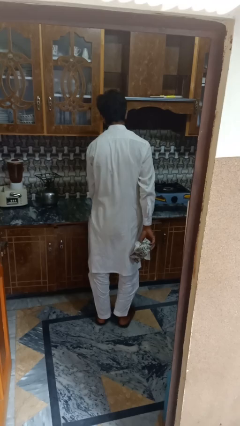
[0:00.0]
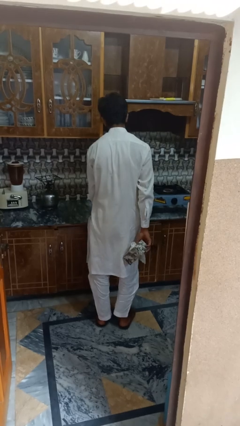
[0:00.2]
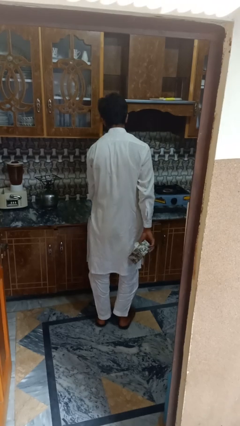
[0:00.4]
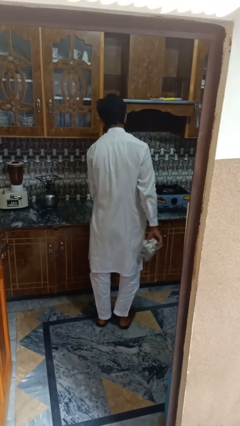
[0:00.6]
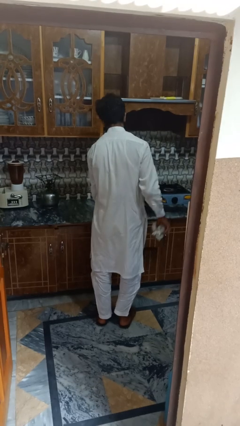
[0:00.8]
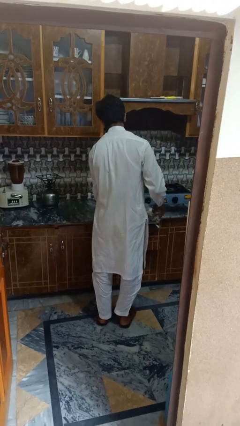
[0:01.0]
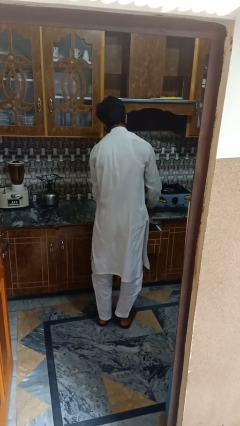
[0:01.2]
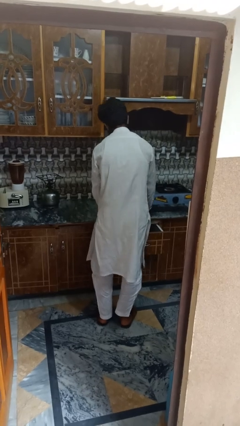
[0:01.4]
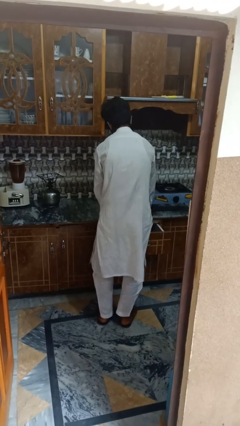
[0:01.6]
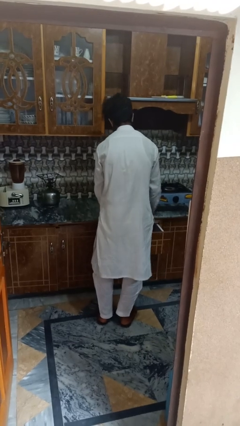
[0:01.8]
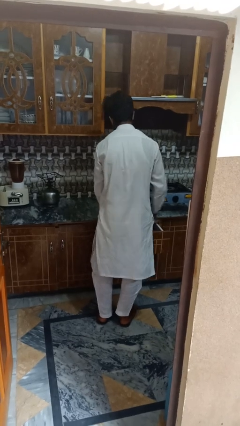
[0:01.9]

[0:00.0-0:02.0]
person takes object from kitchen drawer

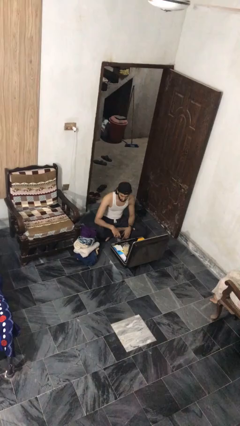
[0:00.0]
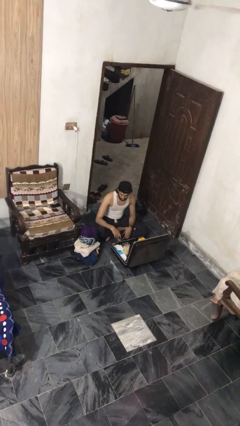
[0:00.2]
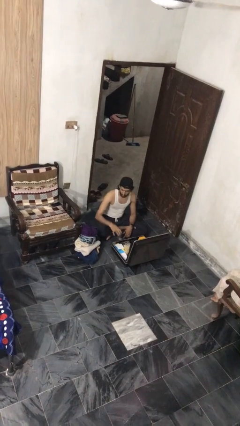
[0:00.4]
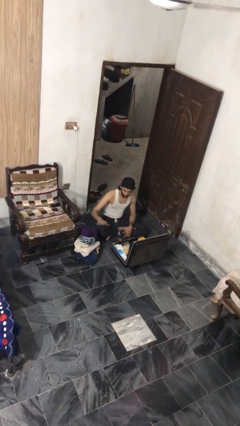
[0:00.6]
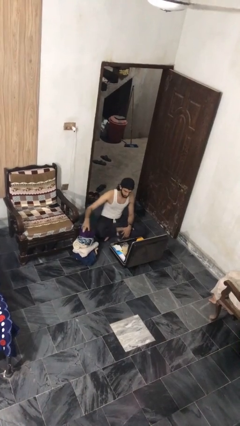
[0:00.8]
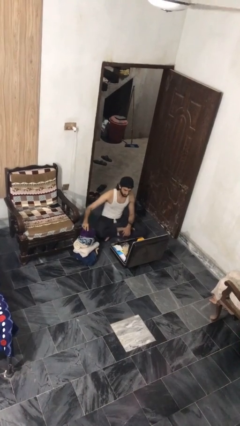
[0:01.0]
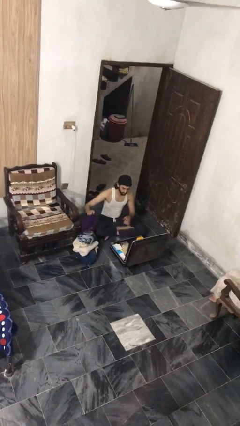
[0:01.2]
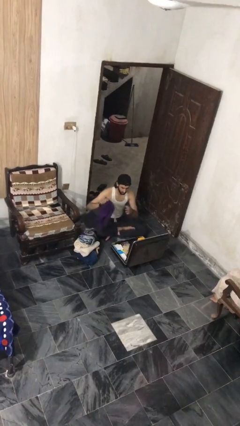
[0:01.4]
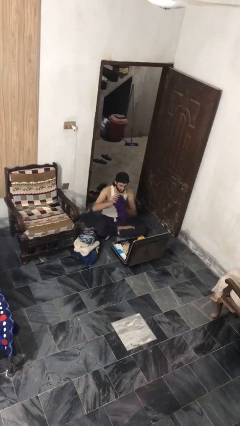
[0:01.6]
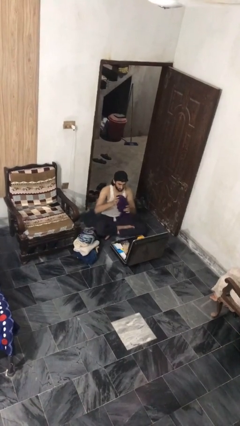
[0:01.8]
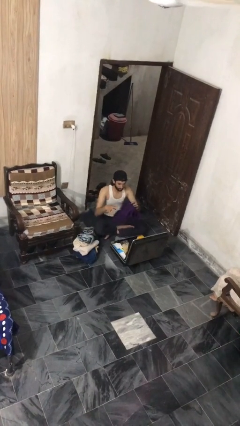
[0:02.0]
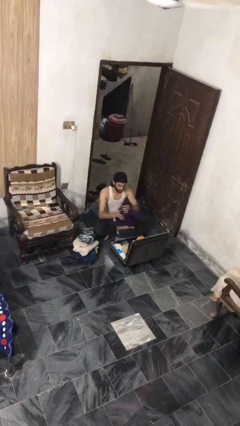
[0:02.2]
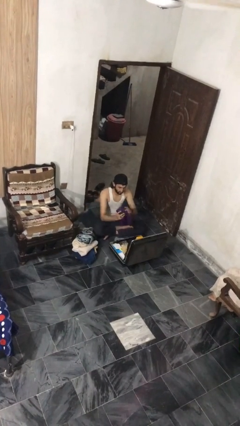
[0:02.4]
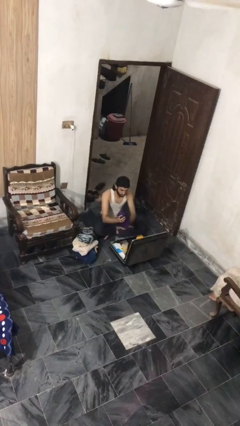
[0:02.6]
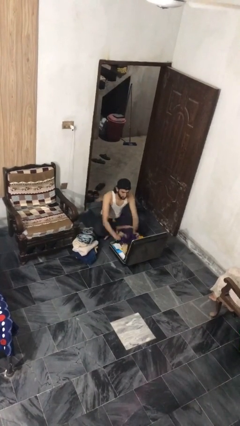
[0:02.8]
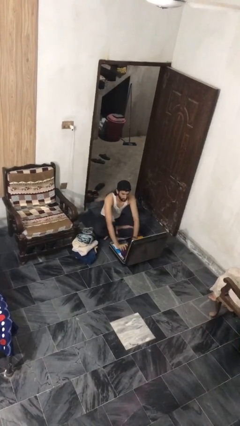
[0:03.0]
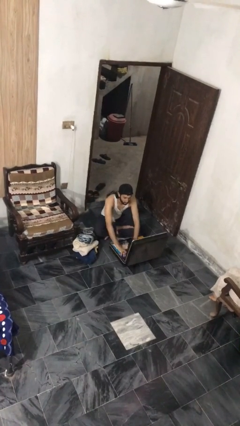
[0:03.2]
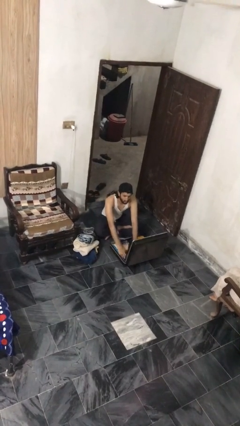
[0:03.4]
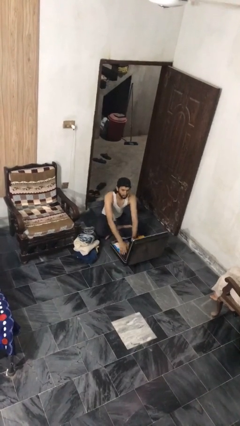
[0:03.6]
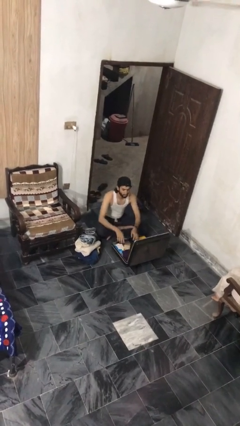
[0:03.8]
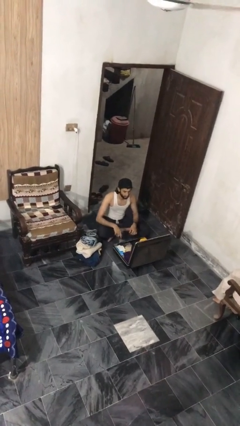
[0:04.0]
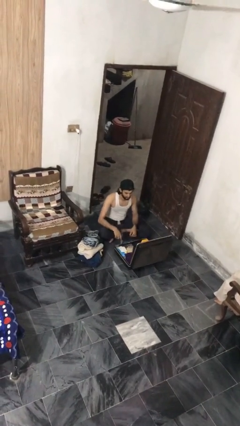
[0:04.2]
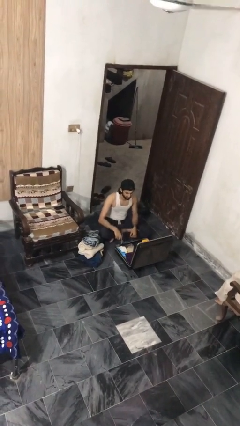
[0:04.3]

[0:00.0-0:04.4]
person loads clothes into suitcase

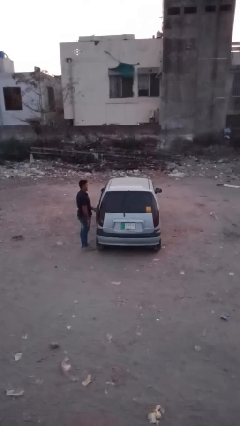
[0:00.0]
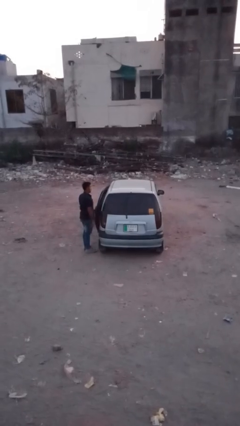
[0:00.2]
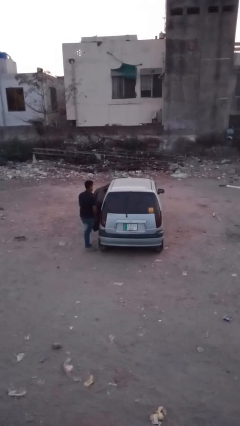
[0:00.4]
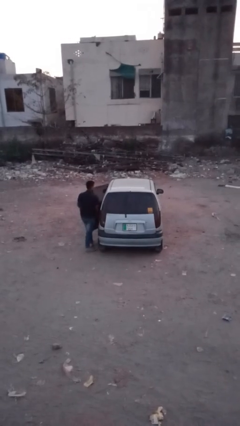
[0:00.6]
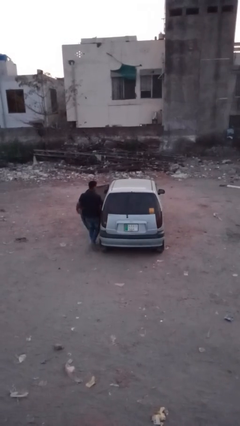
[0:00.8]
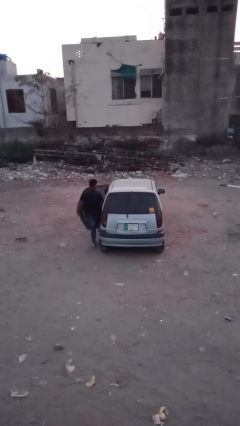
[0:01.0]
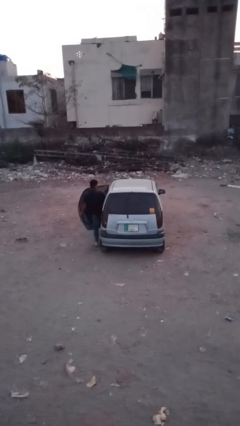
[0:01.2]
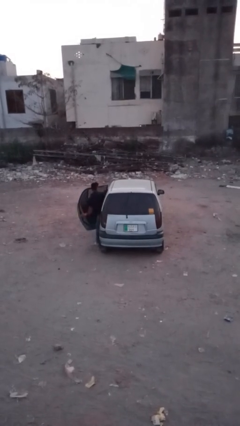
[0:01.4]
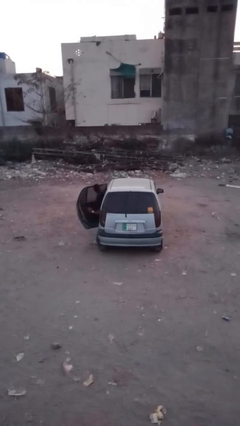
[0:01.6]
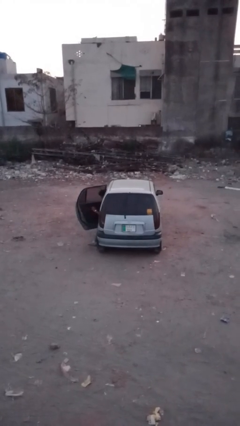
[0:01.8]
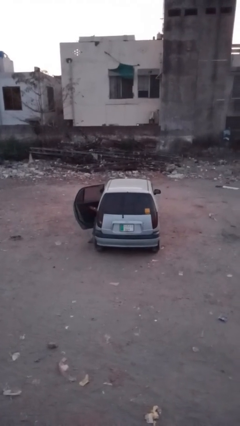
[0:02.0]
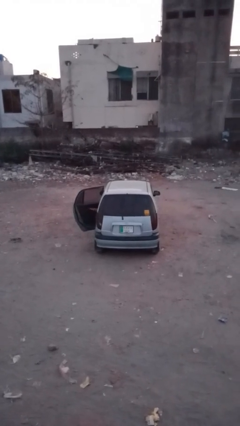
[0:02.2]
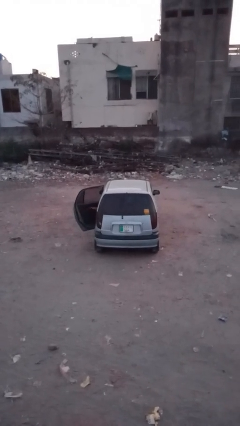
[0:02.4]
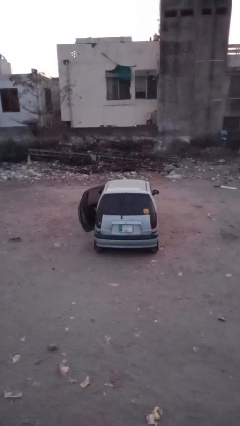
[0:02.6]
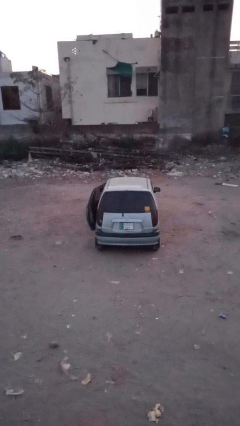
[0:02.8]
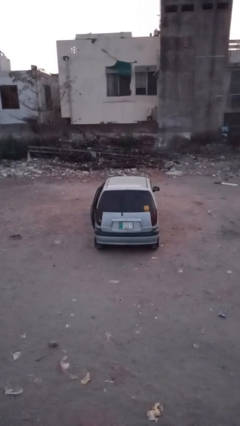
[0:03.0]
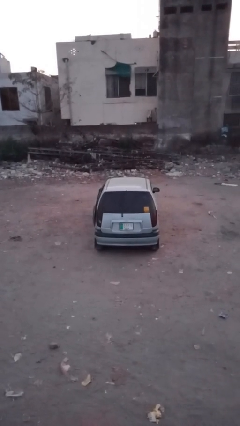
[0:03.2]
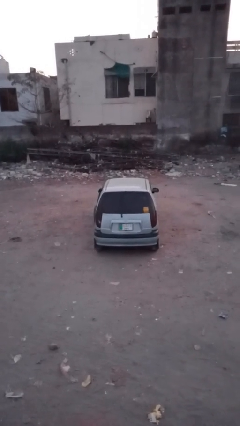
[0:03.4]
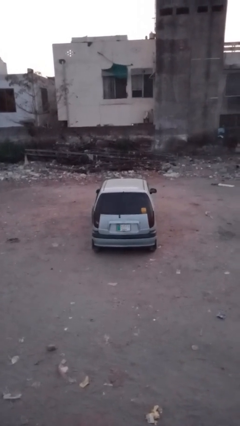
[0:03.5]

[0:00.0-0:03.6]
car picks up person

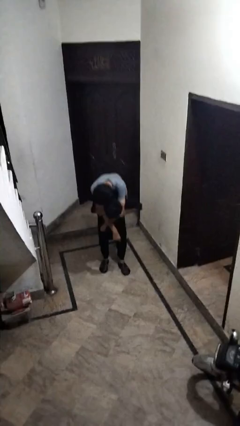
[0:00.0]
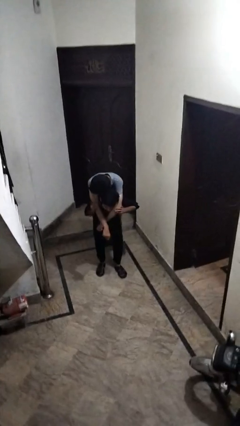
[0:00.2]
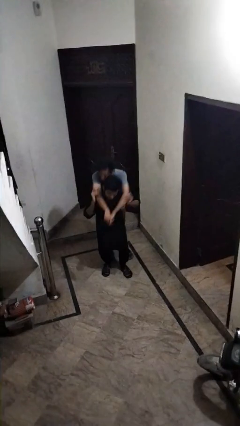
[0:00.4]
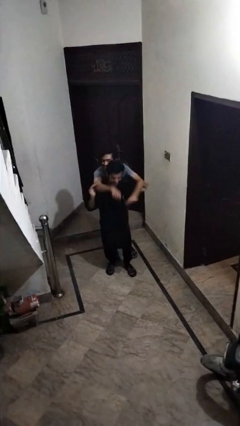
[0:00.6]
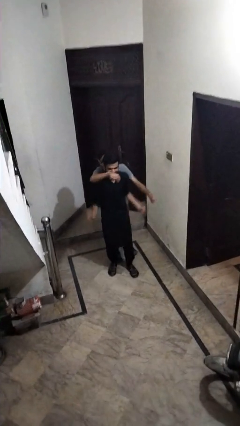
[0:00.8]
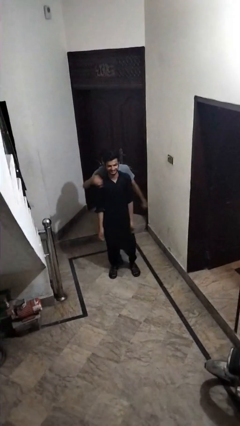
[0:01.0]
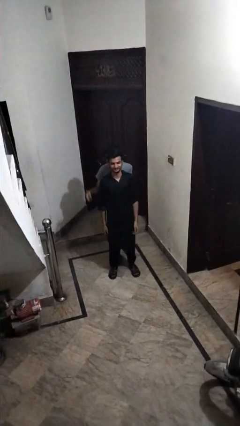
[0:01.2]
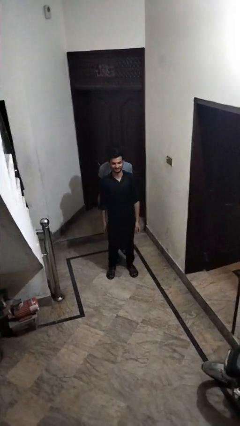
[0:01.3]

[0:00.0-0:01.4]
person puts down person

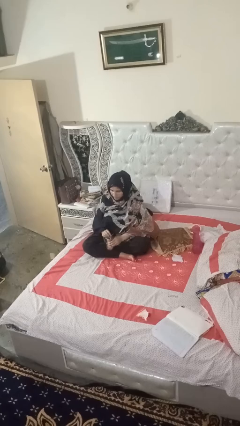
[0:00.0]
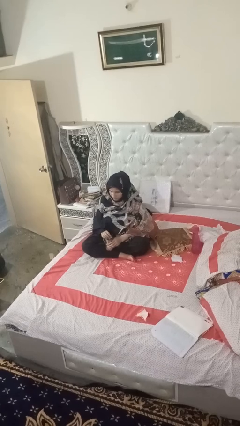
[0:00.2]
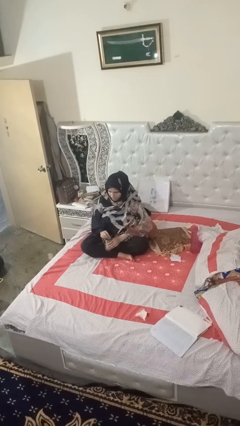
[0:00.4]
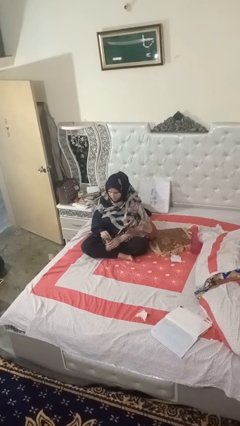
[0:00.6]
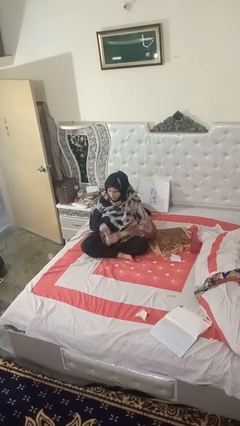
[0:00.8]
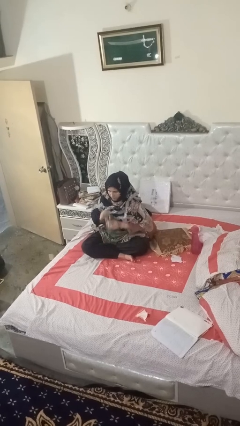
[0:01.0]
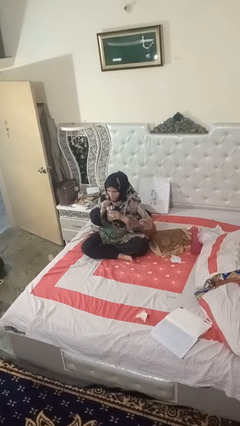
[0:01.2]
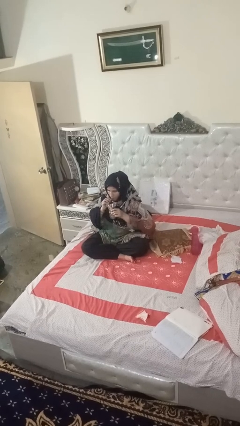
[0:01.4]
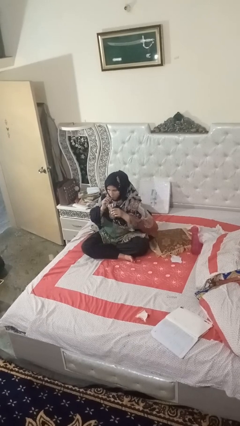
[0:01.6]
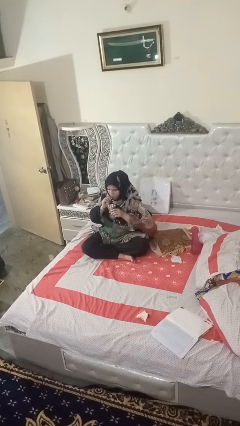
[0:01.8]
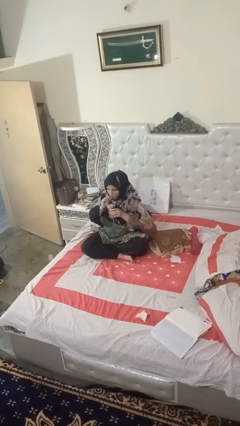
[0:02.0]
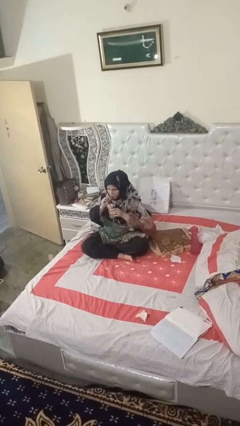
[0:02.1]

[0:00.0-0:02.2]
person drinks from straw

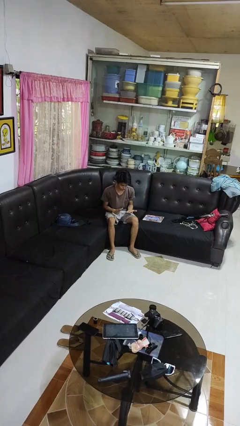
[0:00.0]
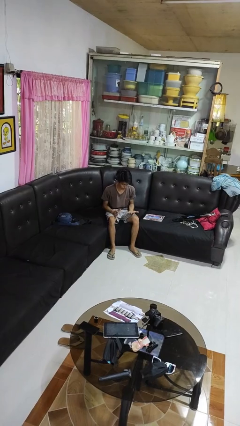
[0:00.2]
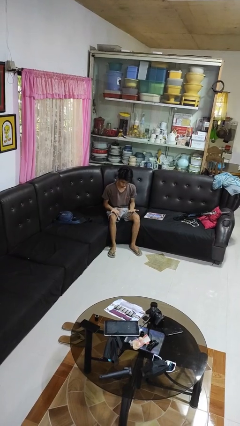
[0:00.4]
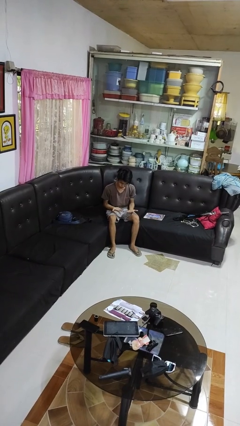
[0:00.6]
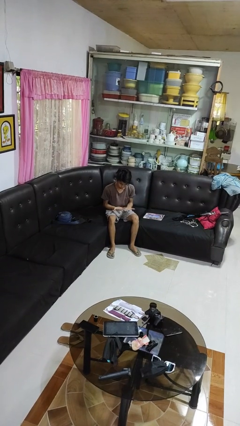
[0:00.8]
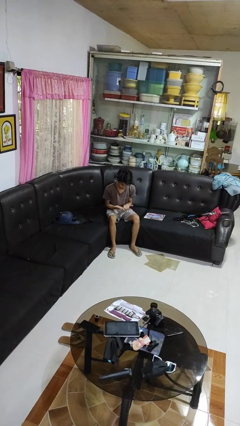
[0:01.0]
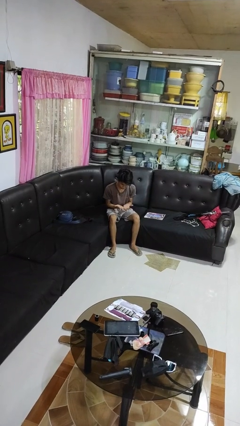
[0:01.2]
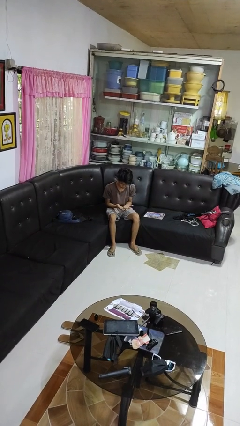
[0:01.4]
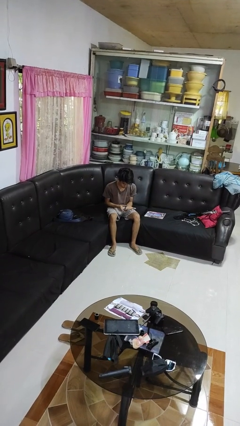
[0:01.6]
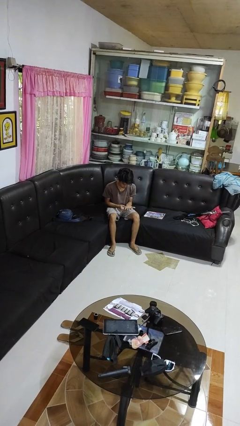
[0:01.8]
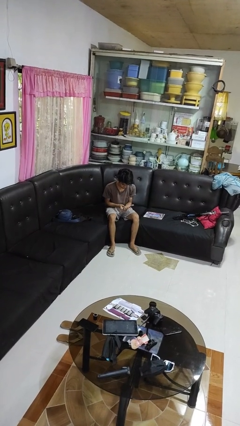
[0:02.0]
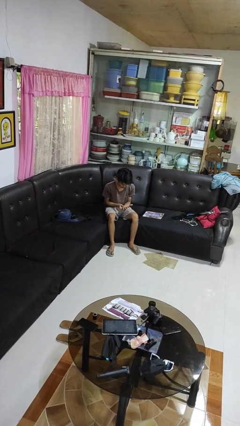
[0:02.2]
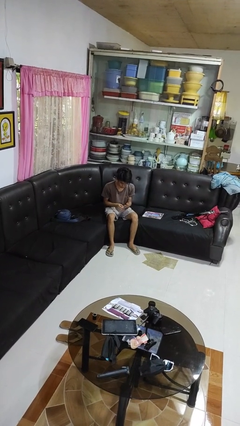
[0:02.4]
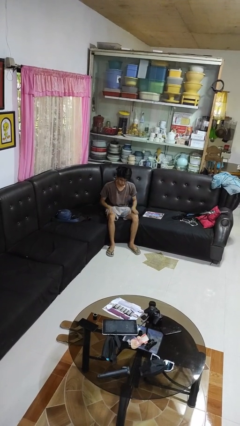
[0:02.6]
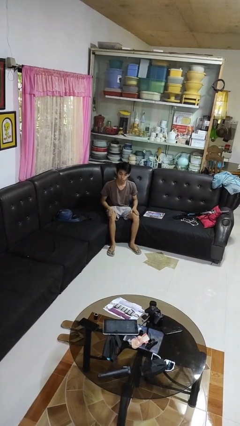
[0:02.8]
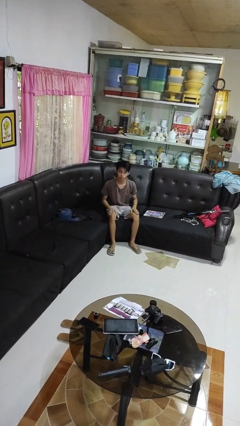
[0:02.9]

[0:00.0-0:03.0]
person looks at hands in lap
